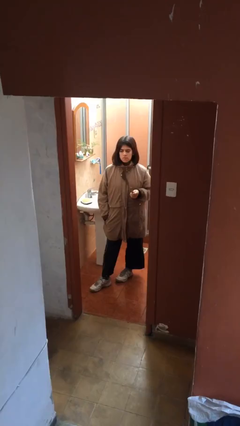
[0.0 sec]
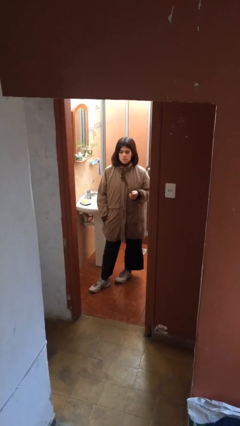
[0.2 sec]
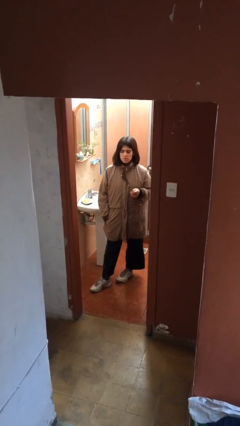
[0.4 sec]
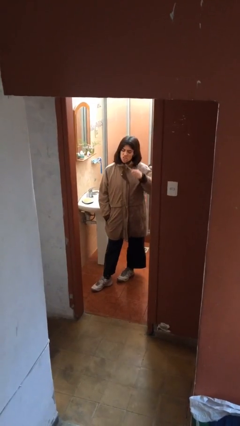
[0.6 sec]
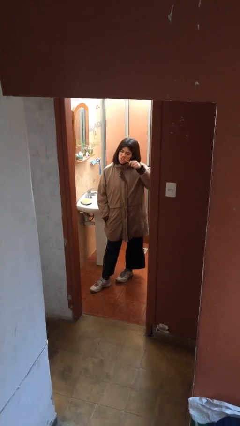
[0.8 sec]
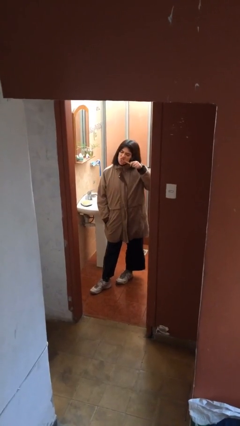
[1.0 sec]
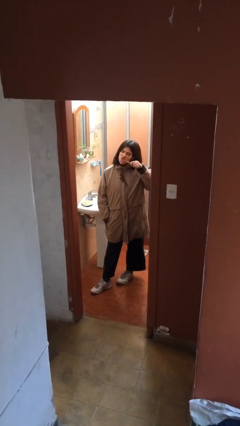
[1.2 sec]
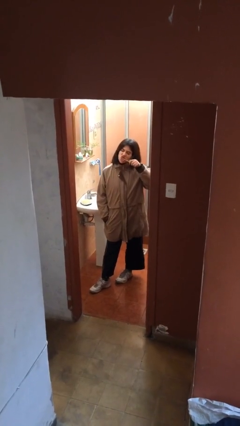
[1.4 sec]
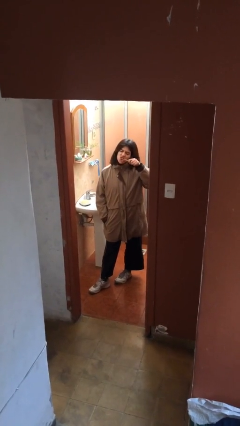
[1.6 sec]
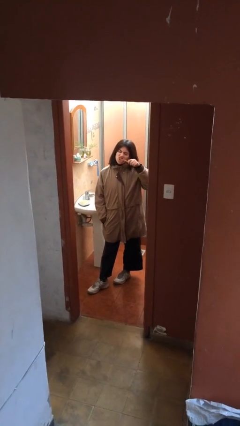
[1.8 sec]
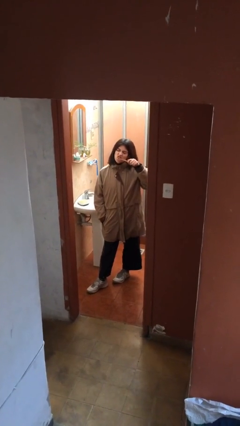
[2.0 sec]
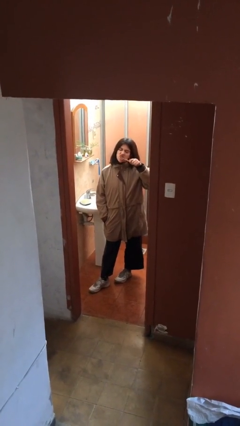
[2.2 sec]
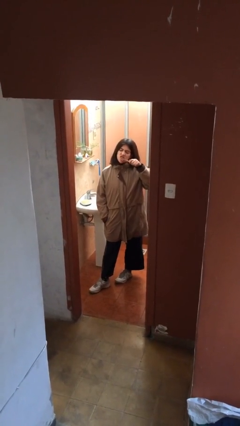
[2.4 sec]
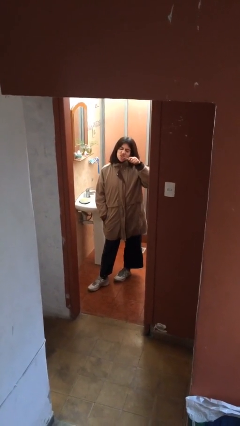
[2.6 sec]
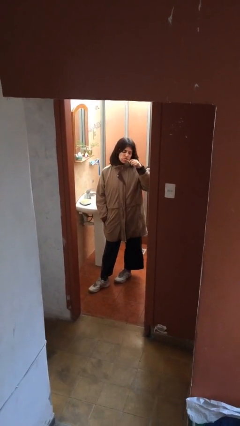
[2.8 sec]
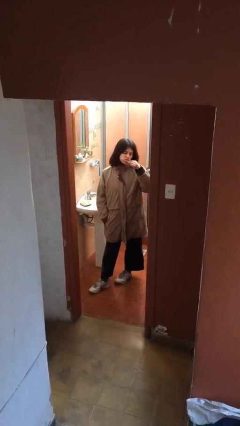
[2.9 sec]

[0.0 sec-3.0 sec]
person brushes teeth

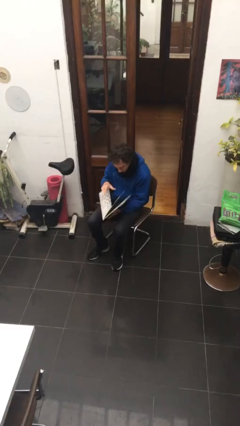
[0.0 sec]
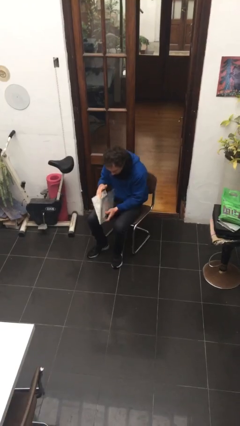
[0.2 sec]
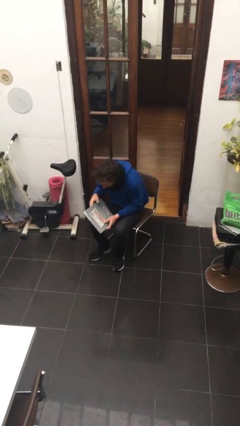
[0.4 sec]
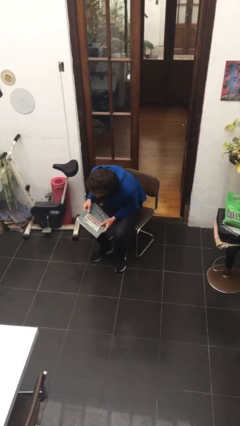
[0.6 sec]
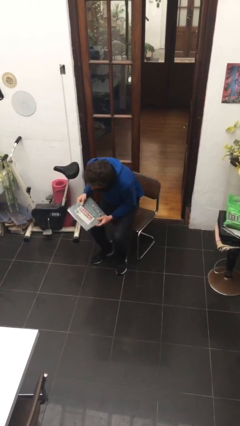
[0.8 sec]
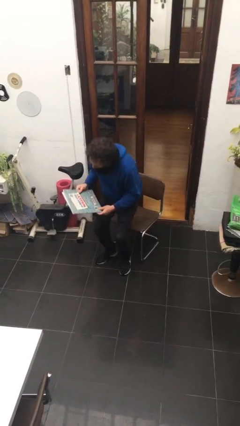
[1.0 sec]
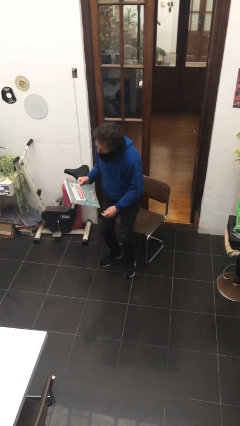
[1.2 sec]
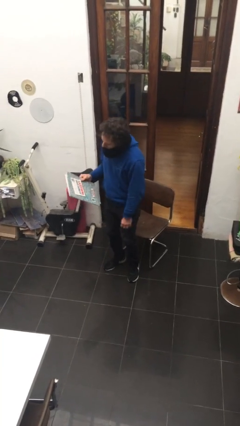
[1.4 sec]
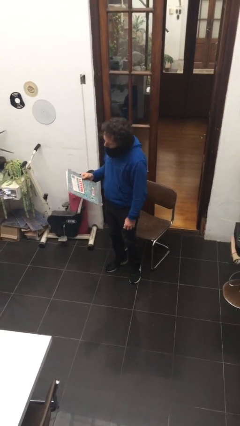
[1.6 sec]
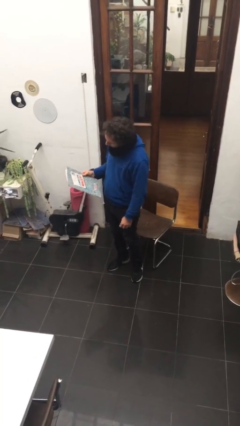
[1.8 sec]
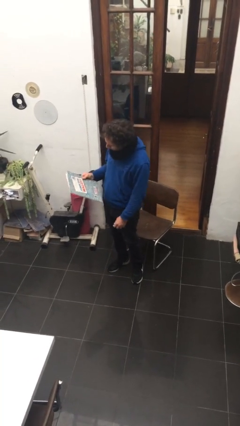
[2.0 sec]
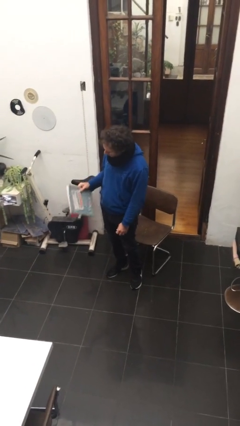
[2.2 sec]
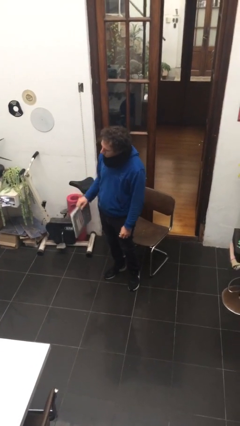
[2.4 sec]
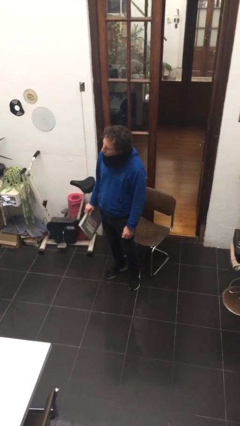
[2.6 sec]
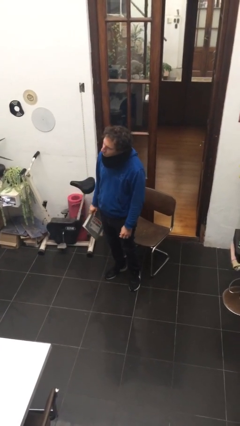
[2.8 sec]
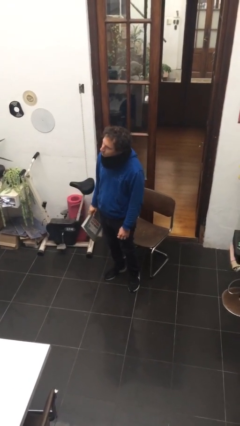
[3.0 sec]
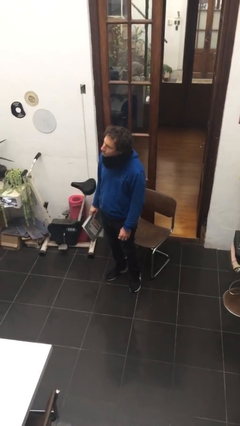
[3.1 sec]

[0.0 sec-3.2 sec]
person stands up

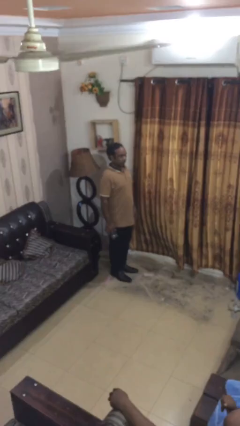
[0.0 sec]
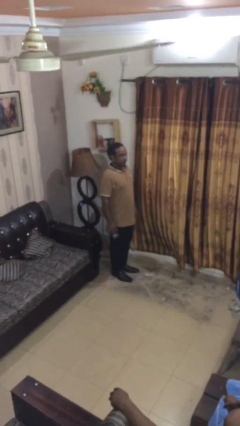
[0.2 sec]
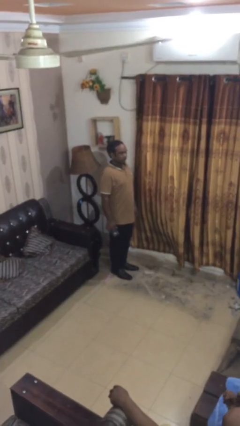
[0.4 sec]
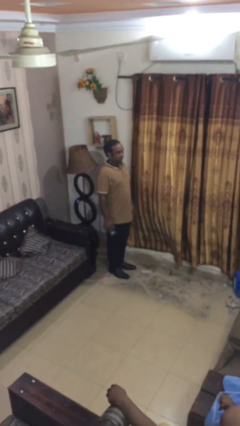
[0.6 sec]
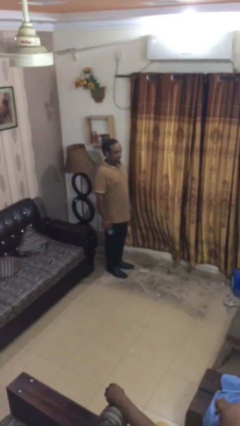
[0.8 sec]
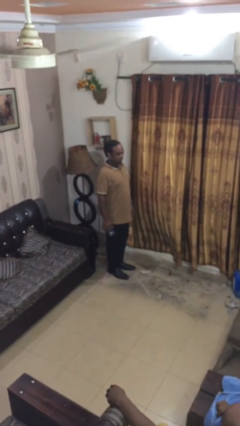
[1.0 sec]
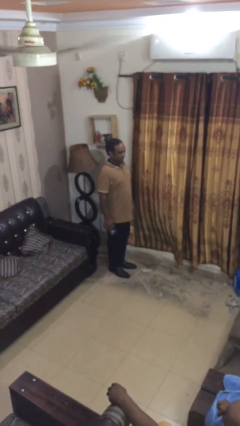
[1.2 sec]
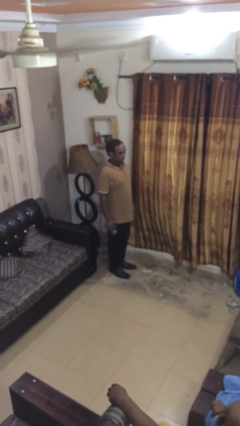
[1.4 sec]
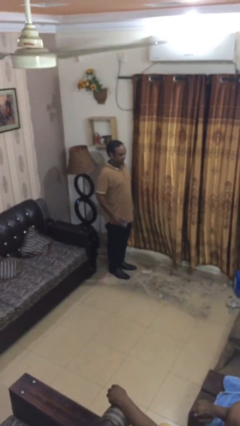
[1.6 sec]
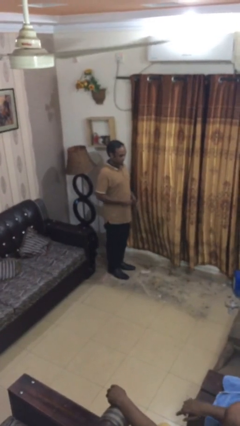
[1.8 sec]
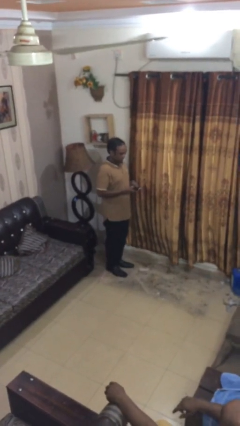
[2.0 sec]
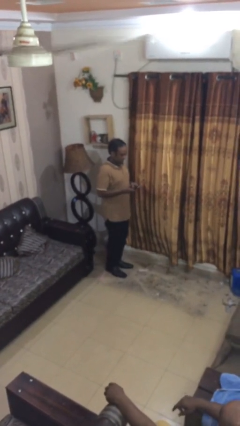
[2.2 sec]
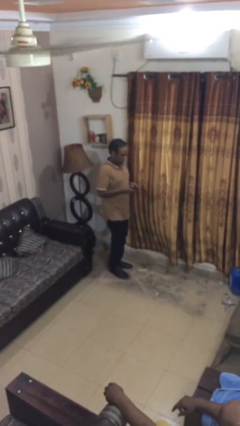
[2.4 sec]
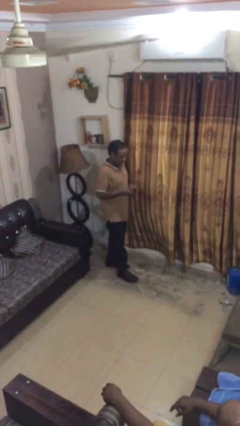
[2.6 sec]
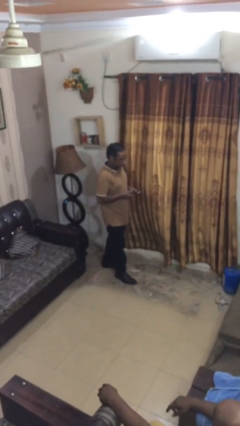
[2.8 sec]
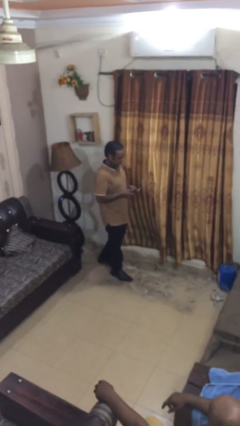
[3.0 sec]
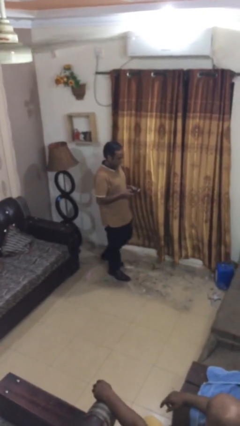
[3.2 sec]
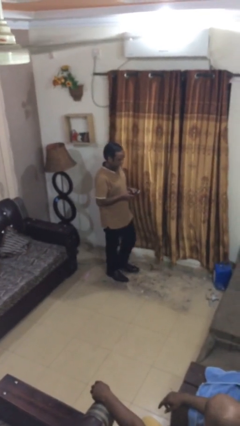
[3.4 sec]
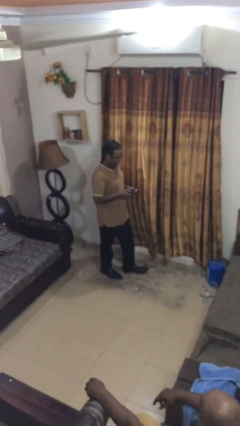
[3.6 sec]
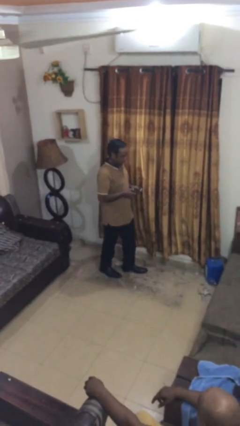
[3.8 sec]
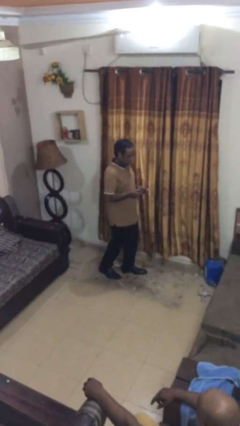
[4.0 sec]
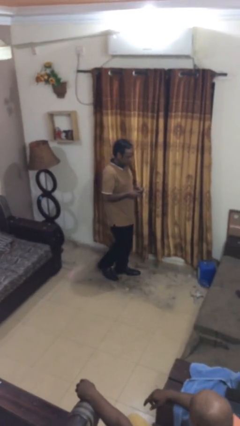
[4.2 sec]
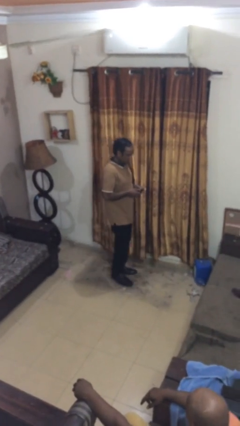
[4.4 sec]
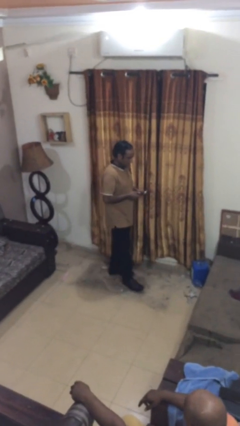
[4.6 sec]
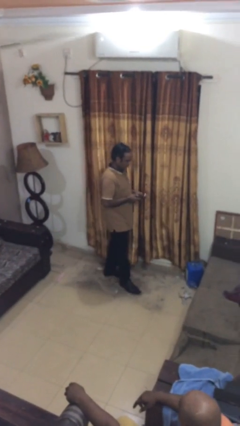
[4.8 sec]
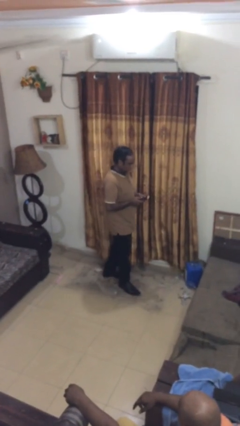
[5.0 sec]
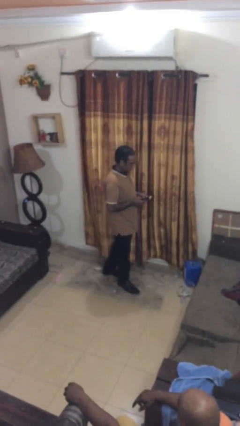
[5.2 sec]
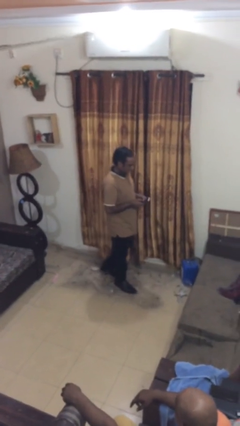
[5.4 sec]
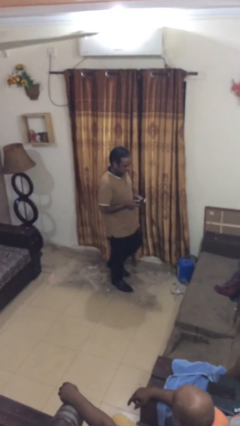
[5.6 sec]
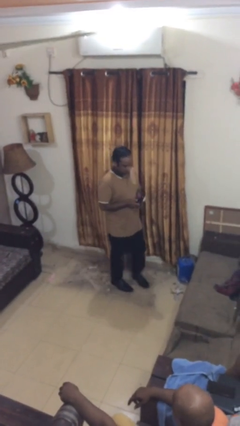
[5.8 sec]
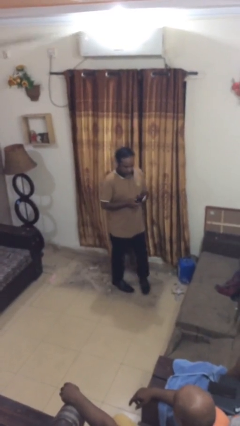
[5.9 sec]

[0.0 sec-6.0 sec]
person texts on phone

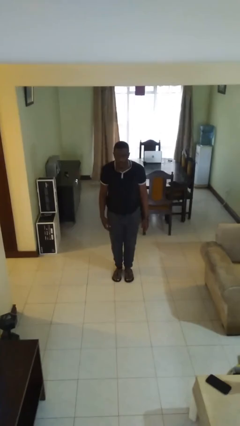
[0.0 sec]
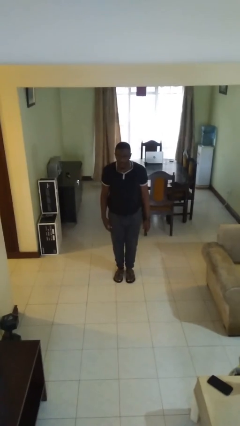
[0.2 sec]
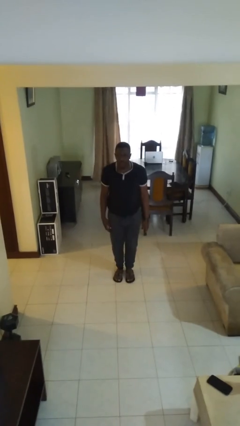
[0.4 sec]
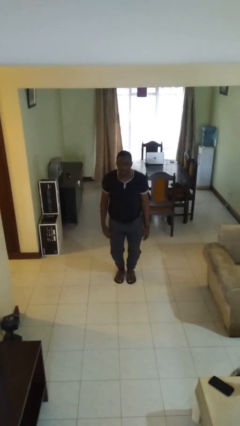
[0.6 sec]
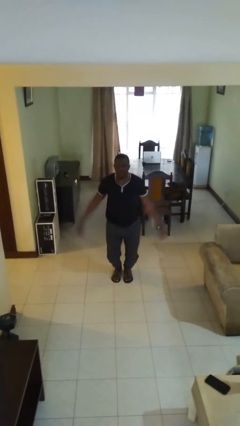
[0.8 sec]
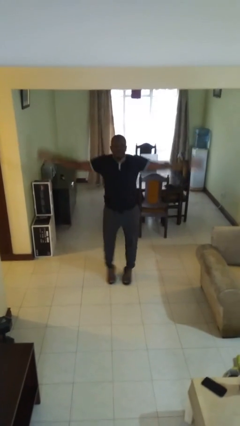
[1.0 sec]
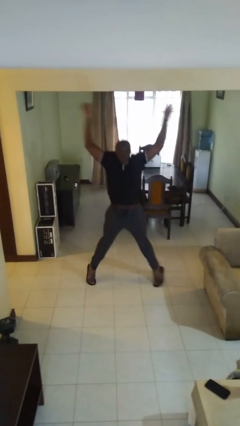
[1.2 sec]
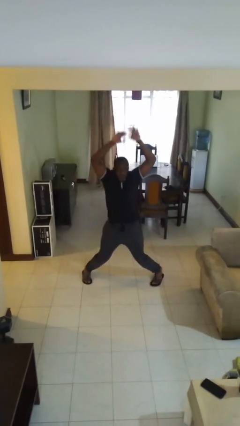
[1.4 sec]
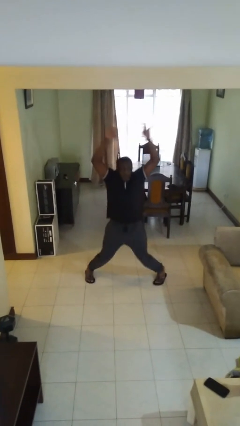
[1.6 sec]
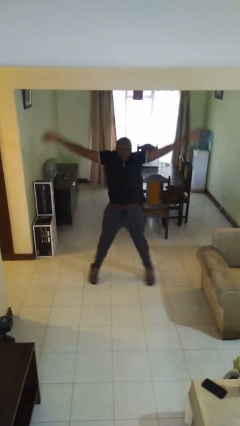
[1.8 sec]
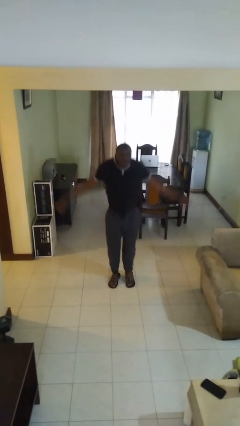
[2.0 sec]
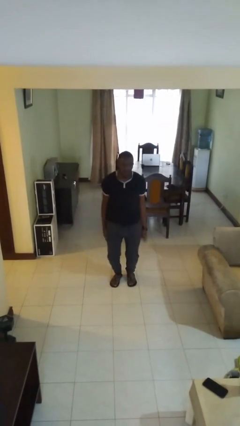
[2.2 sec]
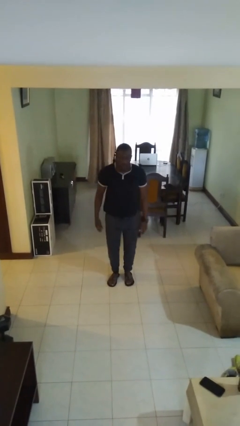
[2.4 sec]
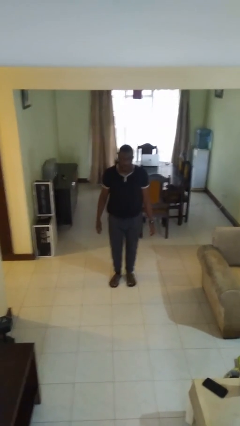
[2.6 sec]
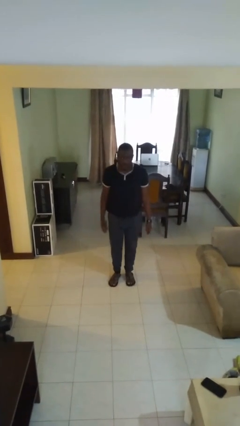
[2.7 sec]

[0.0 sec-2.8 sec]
person exercises with jumping jacks

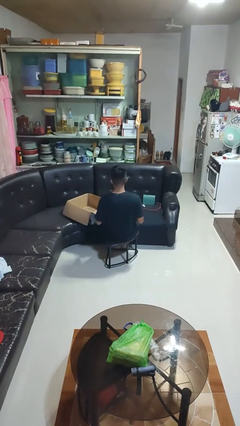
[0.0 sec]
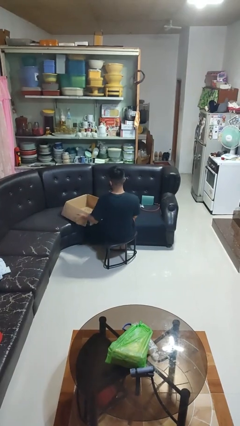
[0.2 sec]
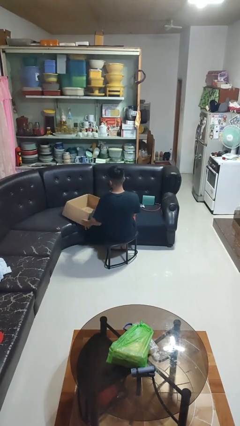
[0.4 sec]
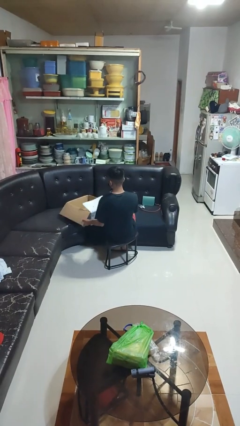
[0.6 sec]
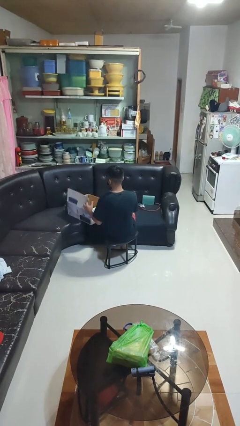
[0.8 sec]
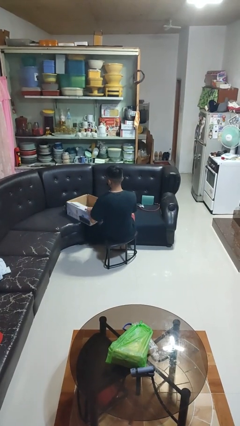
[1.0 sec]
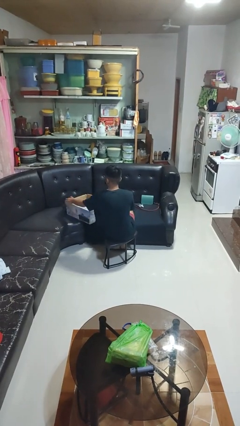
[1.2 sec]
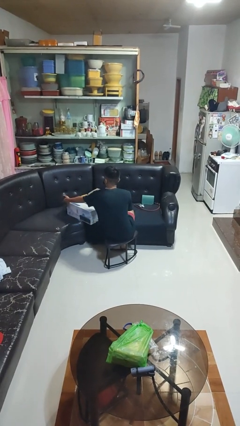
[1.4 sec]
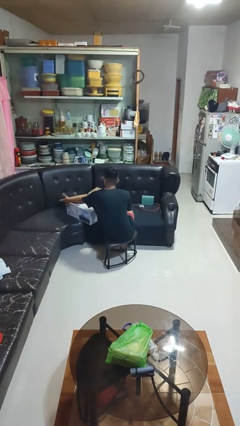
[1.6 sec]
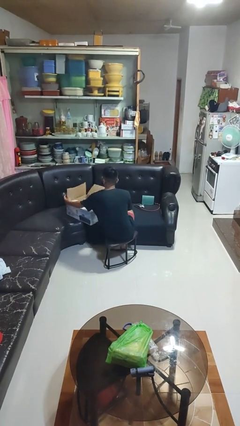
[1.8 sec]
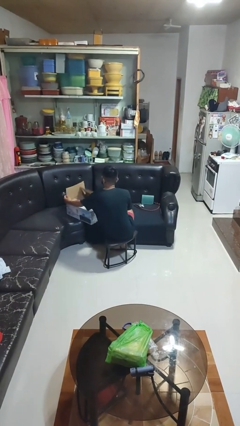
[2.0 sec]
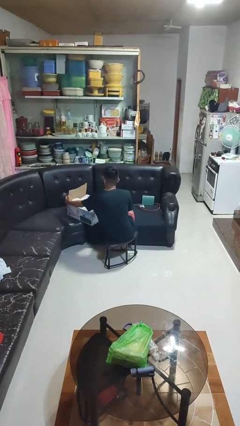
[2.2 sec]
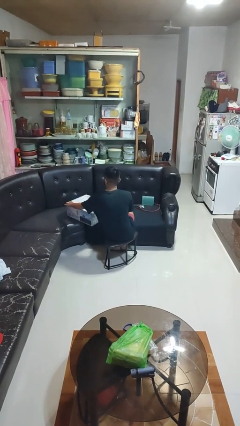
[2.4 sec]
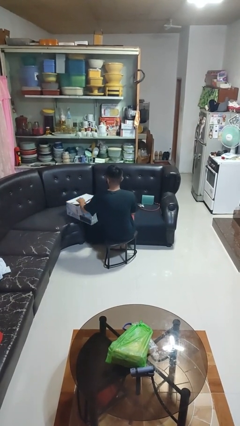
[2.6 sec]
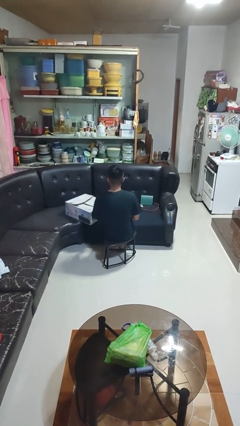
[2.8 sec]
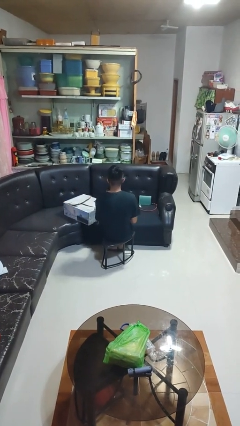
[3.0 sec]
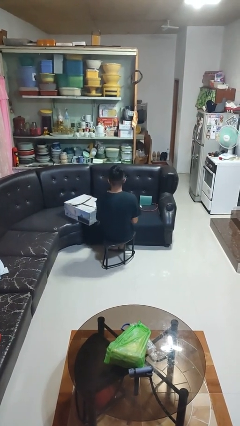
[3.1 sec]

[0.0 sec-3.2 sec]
person closes box
